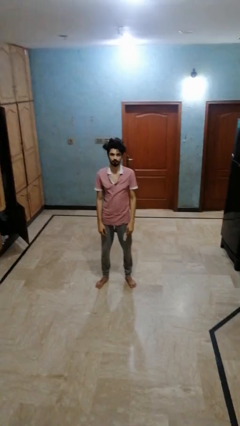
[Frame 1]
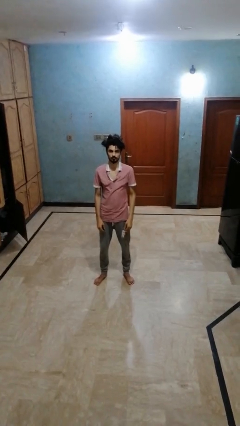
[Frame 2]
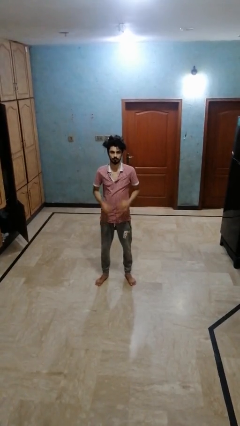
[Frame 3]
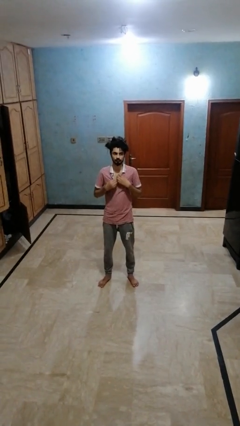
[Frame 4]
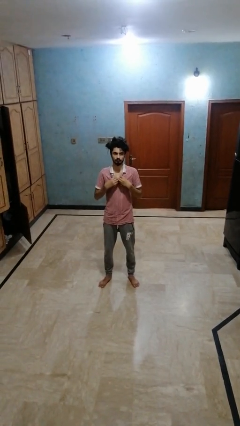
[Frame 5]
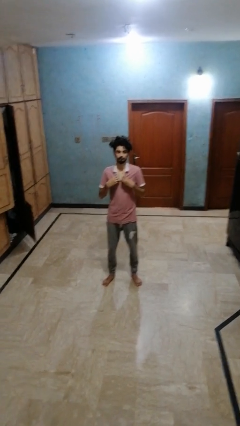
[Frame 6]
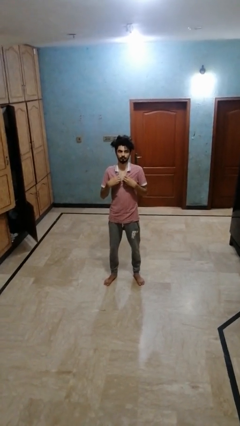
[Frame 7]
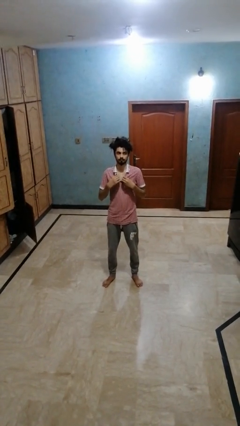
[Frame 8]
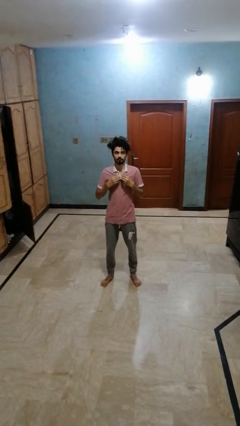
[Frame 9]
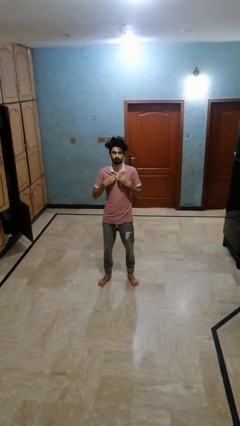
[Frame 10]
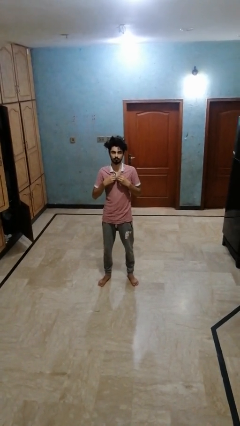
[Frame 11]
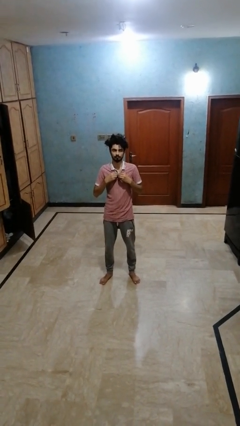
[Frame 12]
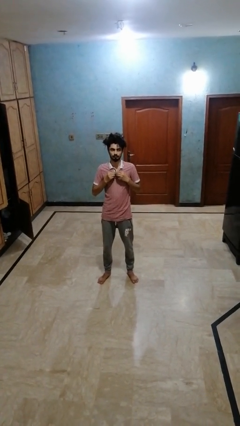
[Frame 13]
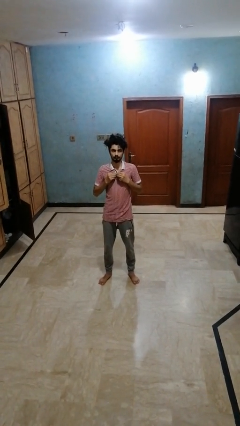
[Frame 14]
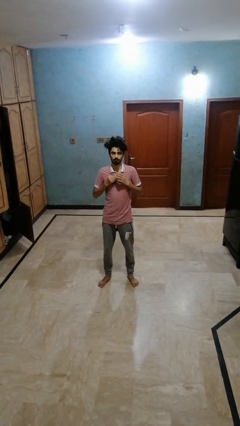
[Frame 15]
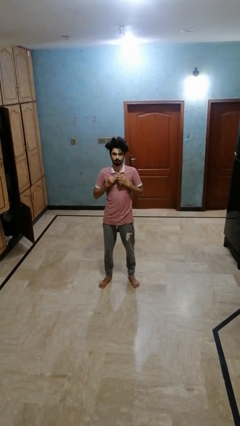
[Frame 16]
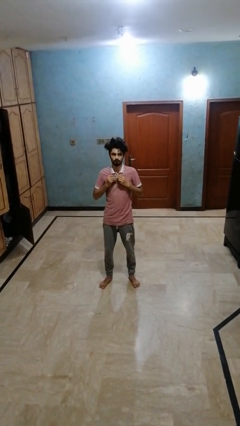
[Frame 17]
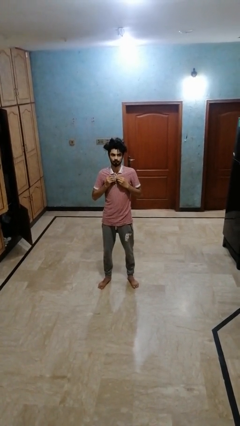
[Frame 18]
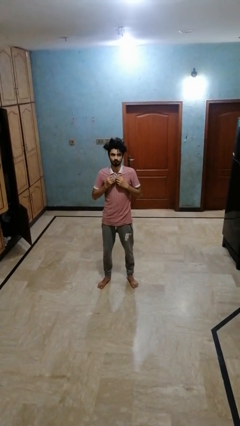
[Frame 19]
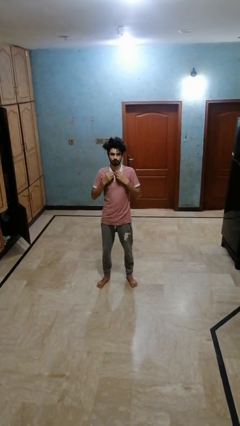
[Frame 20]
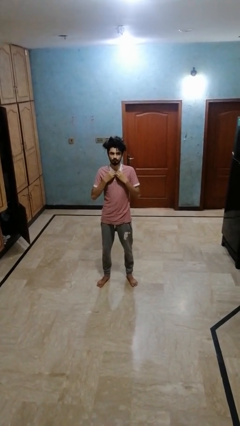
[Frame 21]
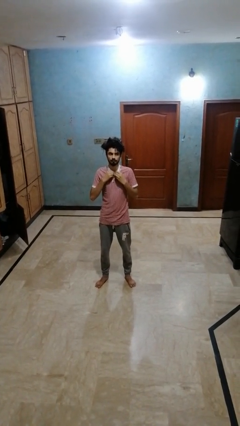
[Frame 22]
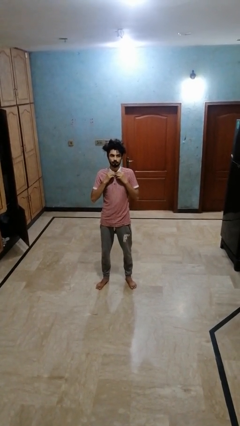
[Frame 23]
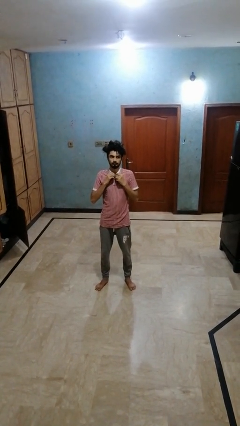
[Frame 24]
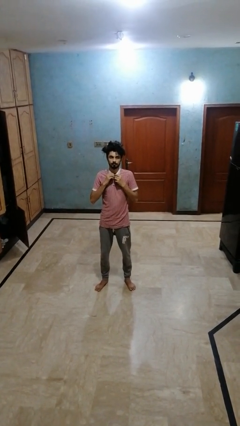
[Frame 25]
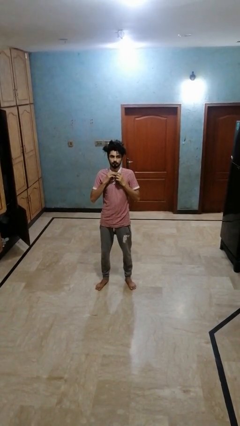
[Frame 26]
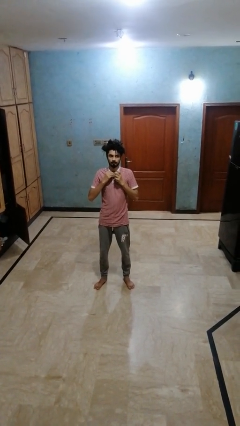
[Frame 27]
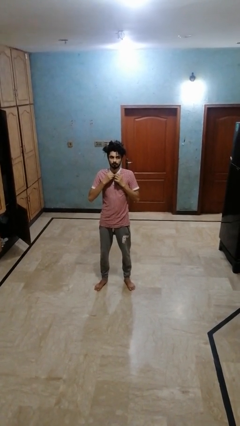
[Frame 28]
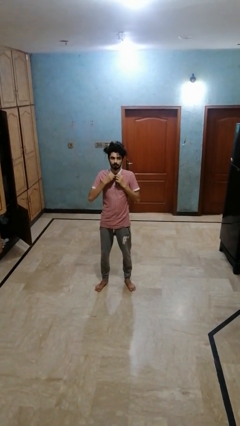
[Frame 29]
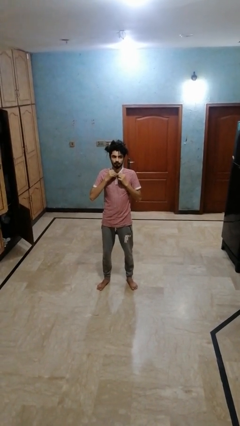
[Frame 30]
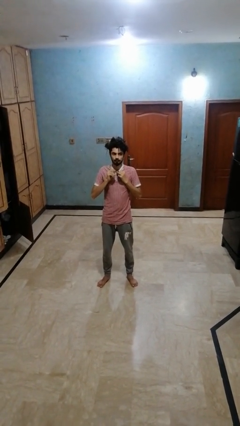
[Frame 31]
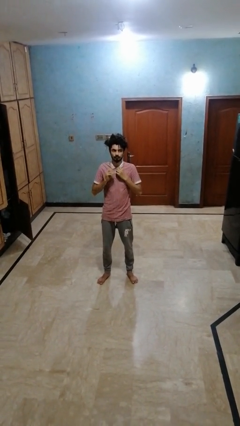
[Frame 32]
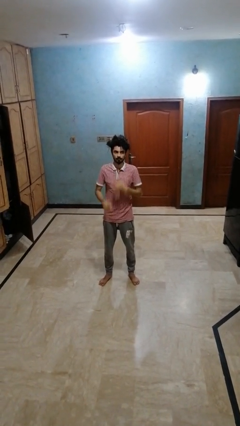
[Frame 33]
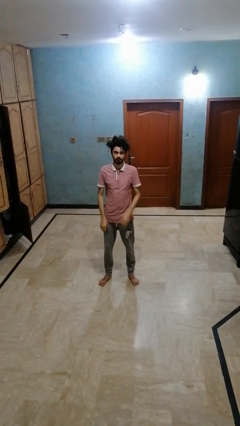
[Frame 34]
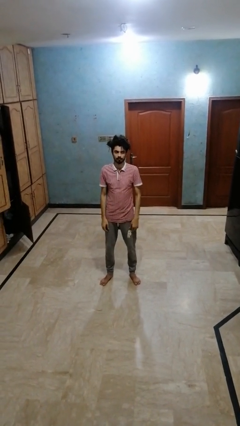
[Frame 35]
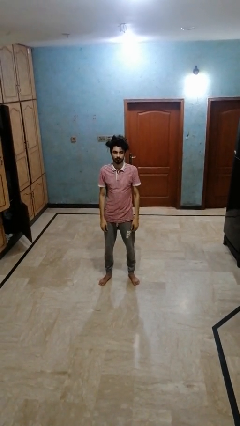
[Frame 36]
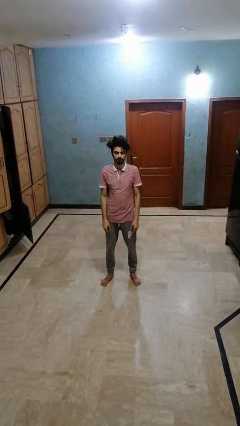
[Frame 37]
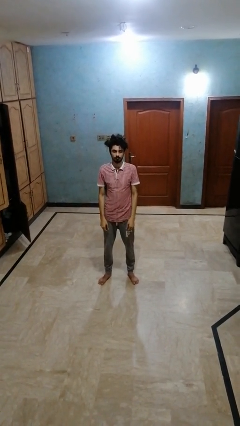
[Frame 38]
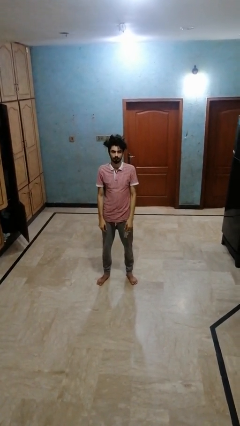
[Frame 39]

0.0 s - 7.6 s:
person buttons shirt

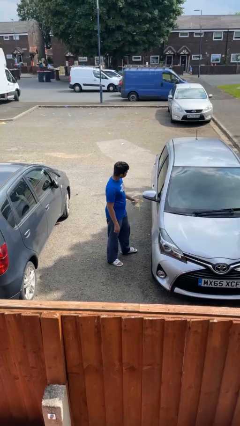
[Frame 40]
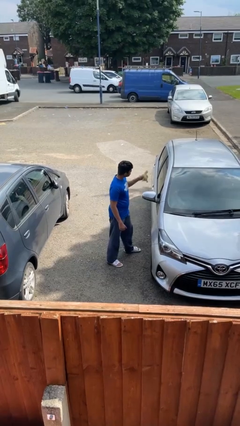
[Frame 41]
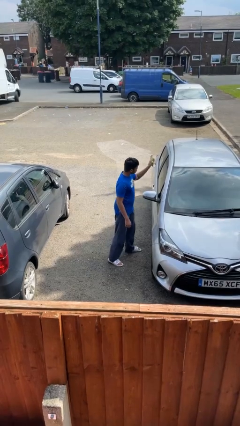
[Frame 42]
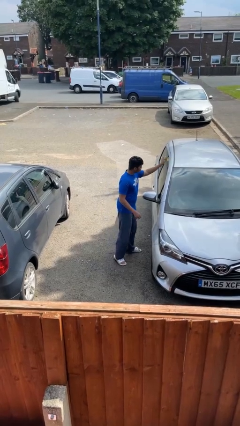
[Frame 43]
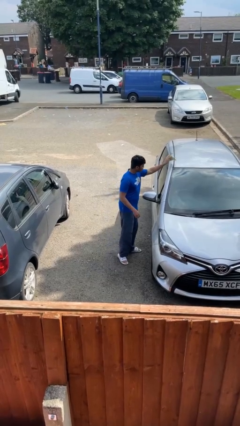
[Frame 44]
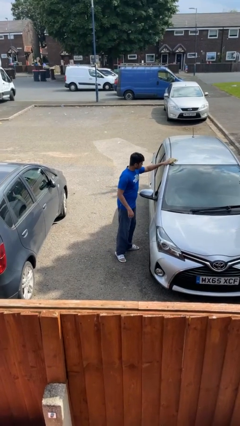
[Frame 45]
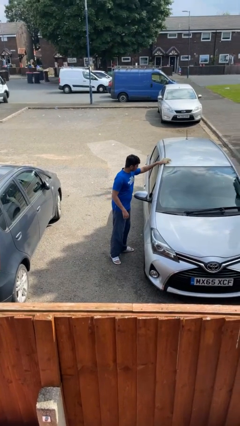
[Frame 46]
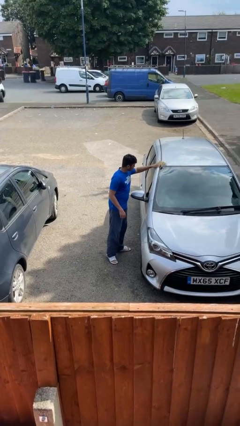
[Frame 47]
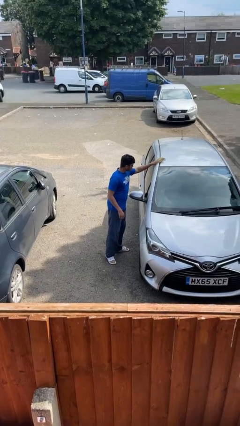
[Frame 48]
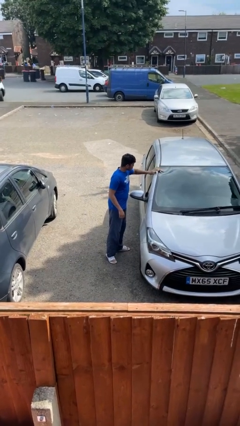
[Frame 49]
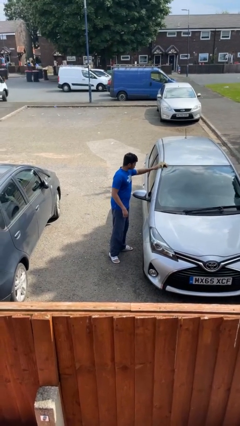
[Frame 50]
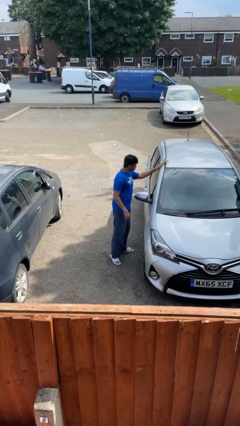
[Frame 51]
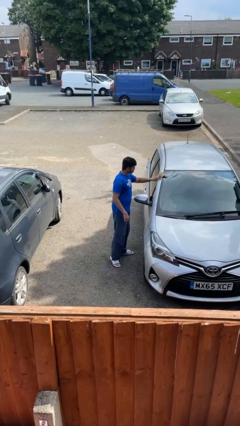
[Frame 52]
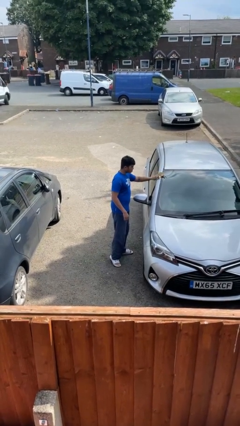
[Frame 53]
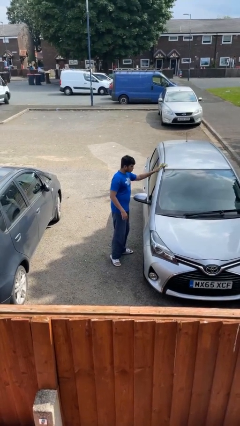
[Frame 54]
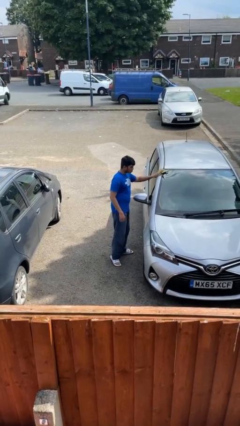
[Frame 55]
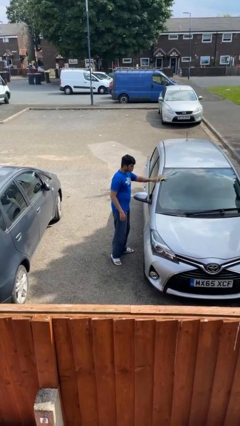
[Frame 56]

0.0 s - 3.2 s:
person polishes car with rag

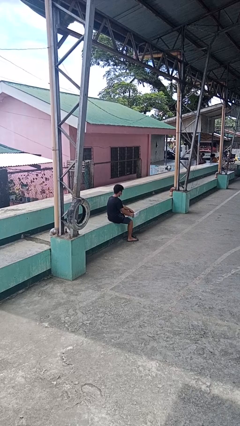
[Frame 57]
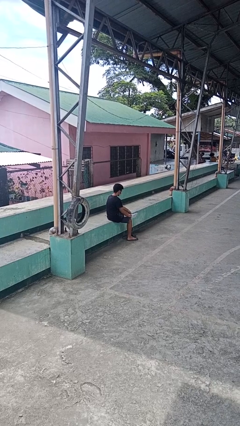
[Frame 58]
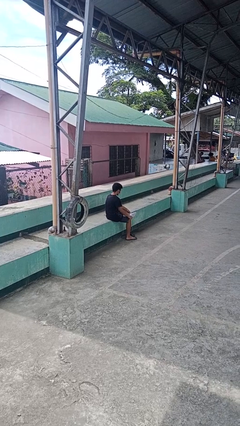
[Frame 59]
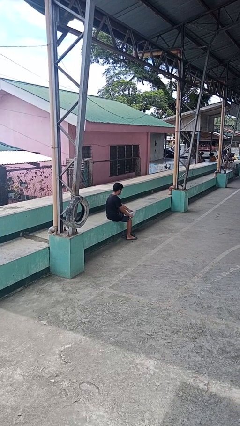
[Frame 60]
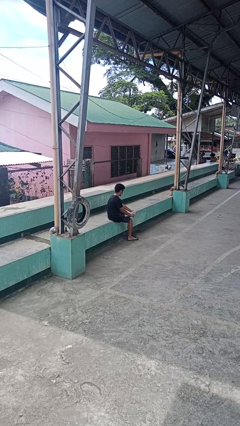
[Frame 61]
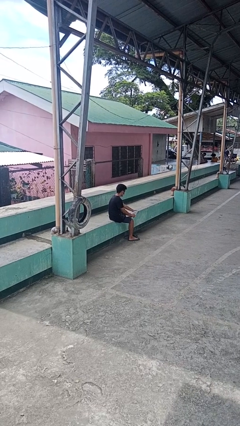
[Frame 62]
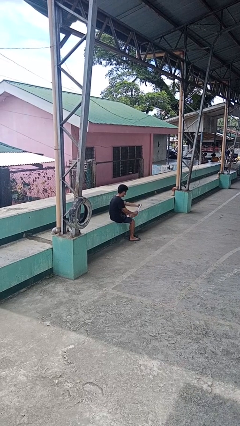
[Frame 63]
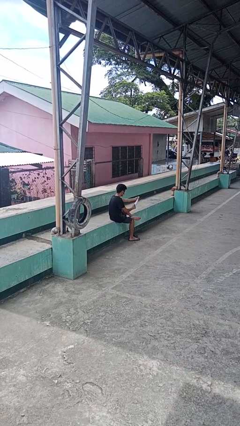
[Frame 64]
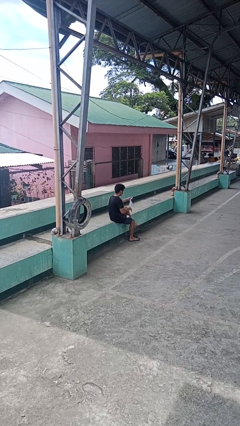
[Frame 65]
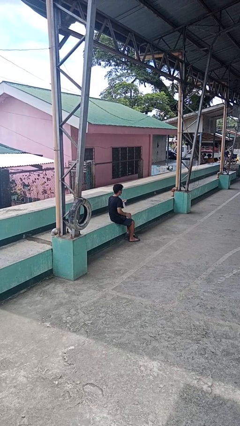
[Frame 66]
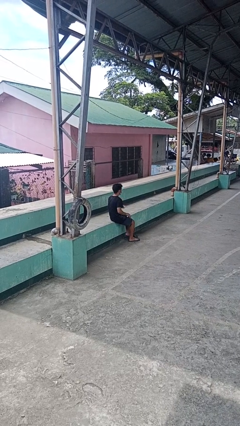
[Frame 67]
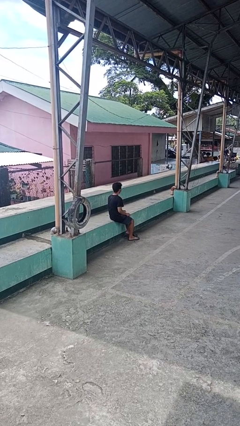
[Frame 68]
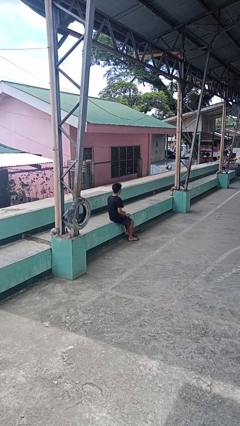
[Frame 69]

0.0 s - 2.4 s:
person takes off socks

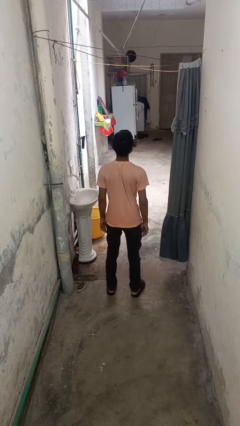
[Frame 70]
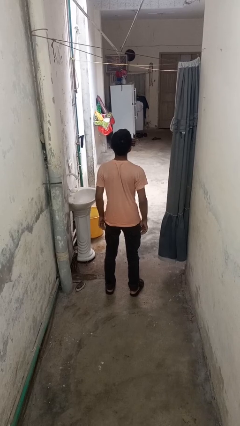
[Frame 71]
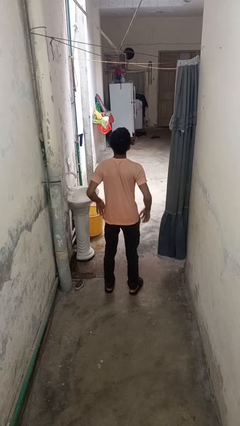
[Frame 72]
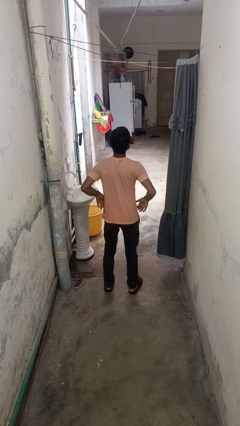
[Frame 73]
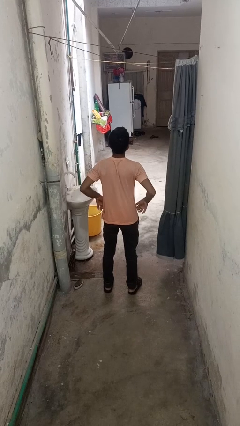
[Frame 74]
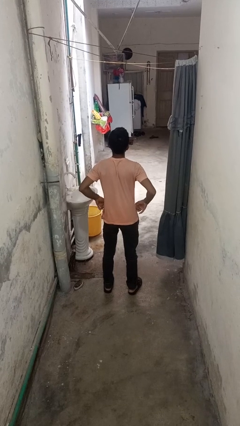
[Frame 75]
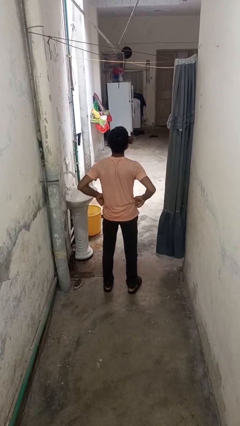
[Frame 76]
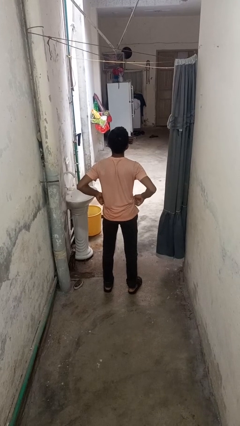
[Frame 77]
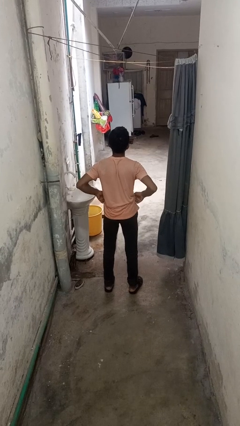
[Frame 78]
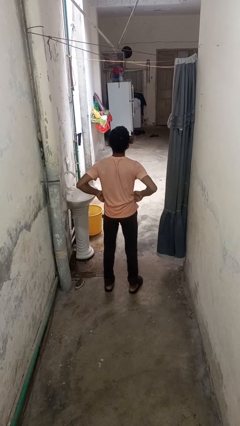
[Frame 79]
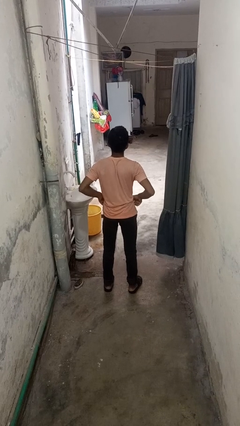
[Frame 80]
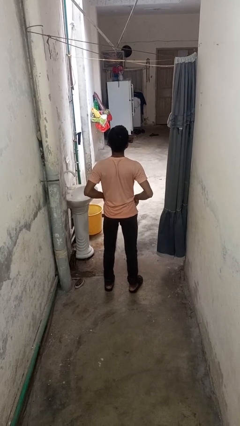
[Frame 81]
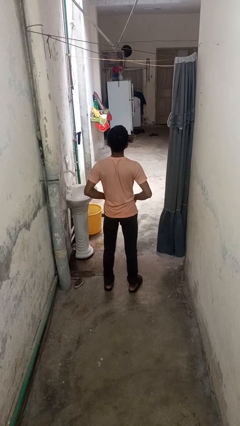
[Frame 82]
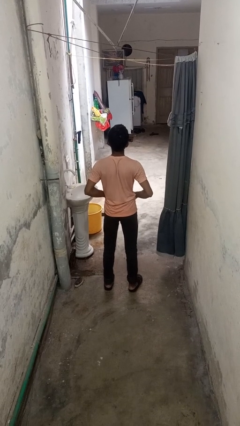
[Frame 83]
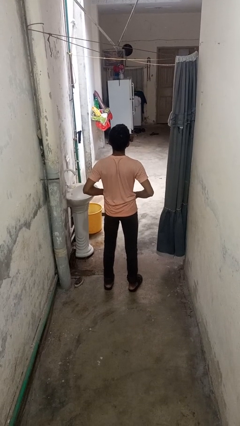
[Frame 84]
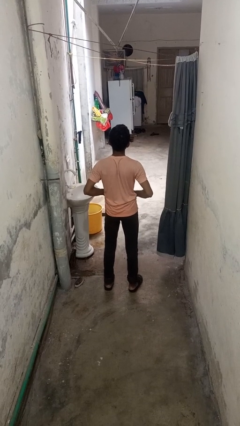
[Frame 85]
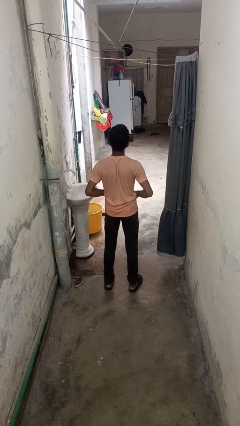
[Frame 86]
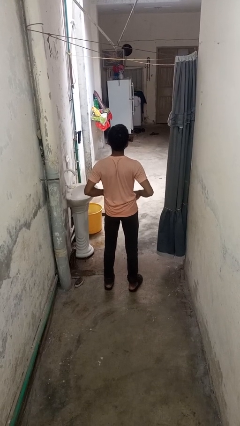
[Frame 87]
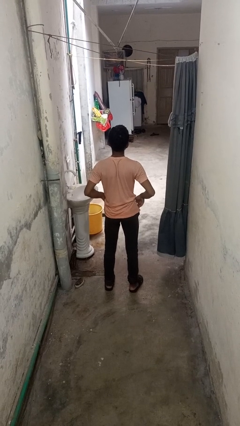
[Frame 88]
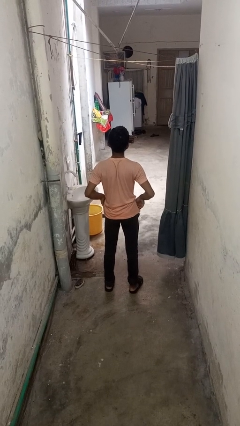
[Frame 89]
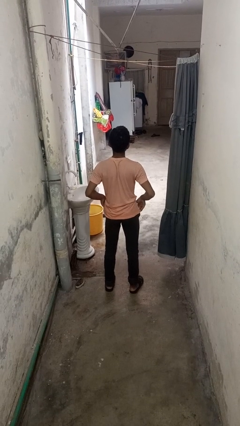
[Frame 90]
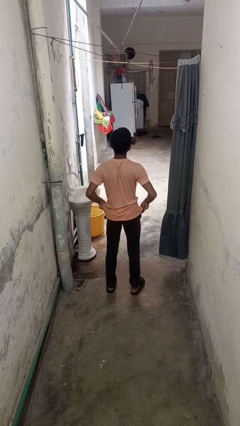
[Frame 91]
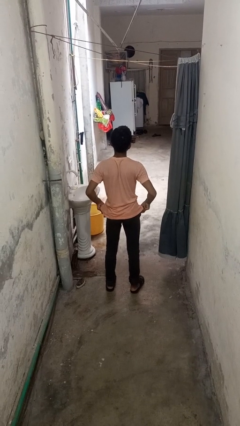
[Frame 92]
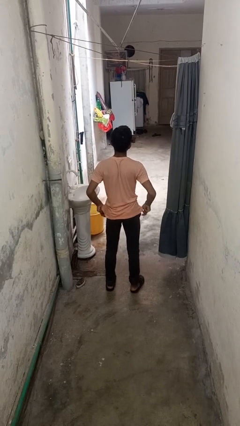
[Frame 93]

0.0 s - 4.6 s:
person hikes up pants
